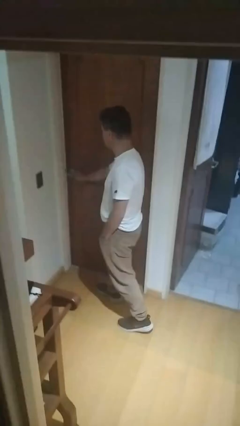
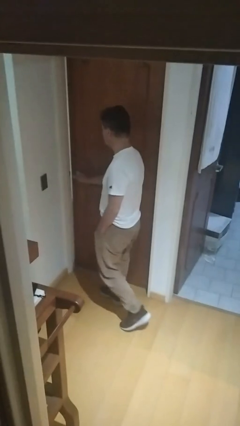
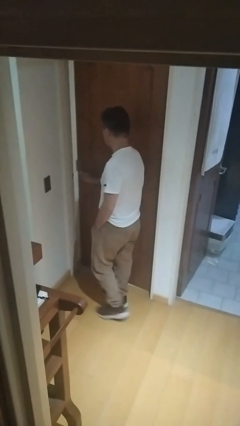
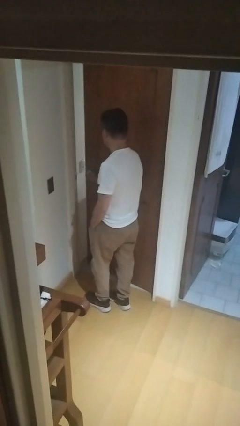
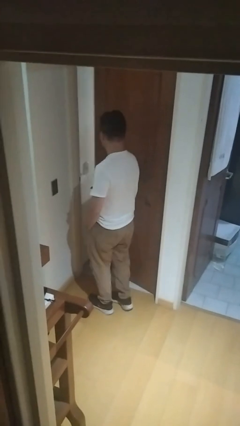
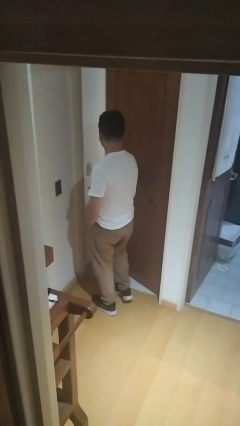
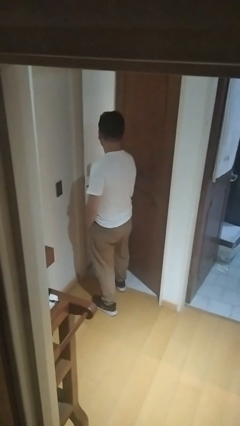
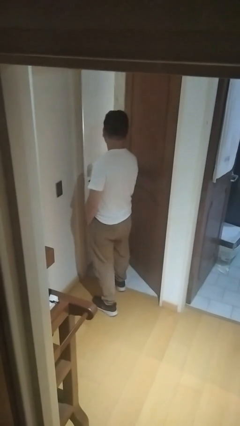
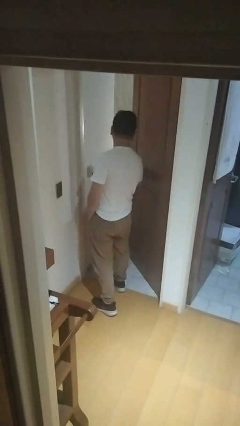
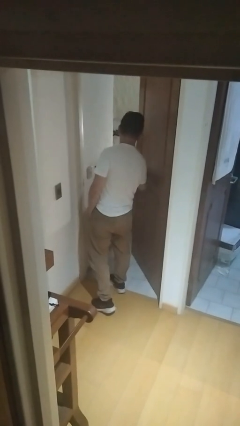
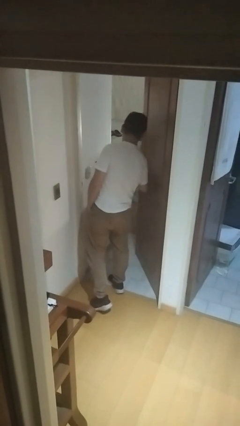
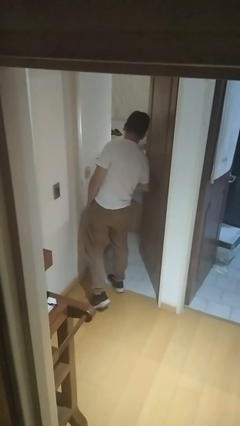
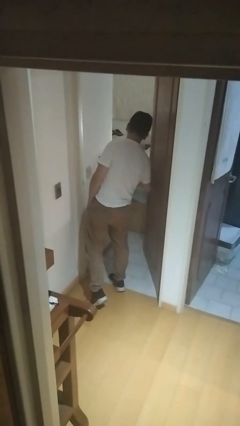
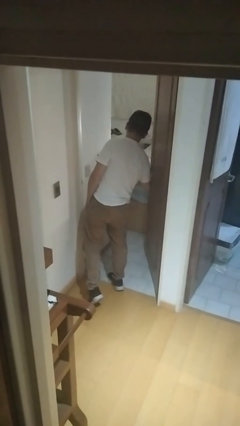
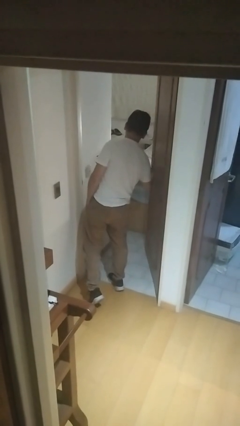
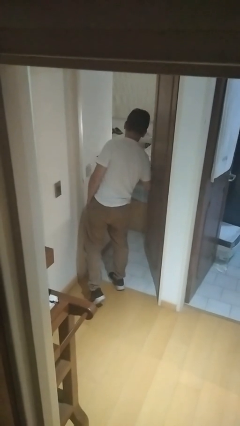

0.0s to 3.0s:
person opens facility door

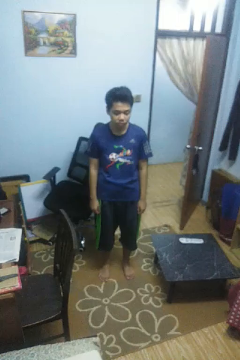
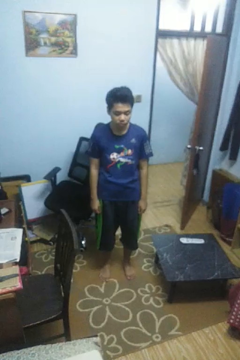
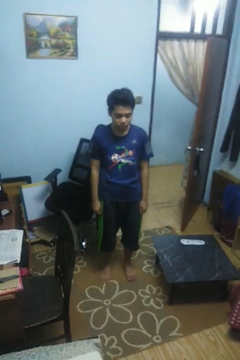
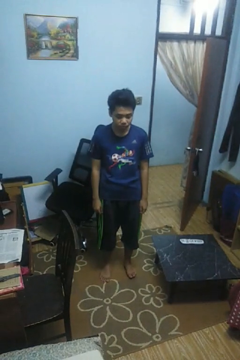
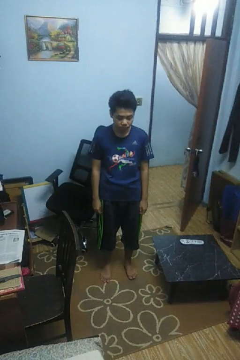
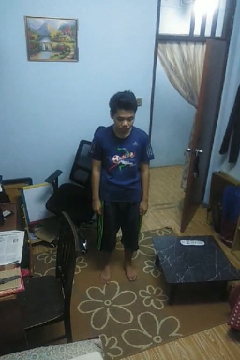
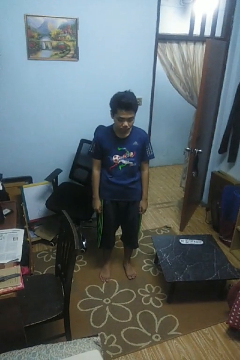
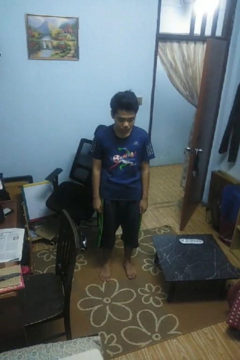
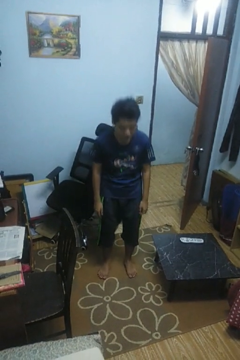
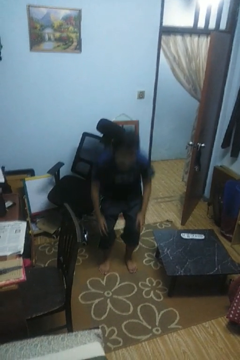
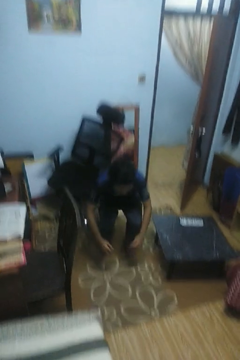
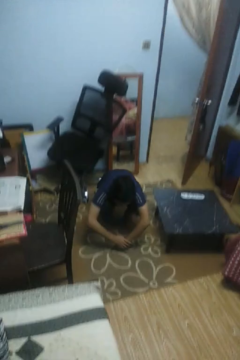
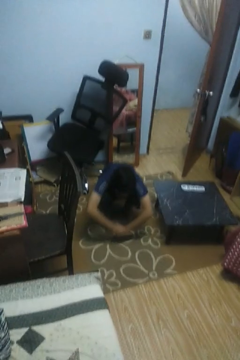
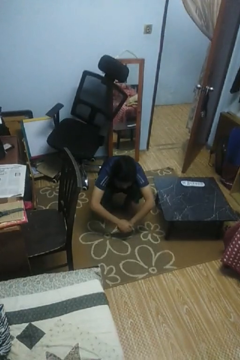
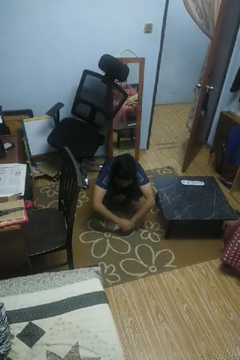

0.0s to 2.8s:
person squats

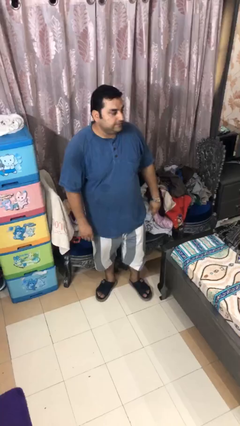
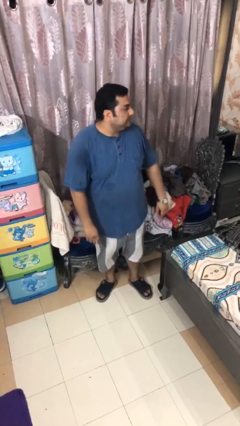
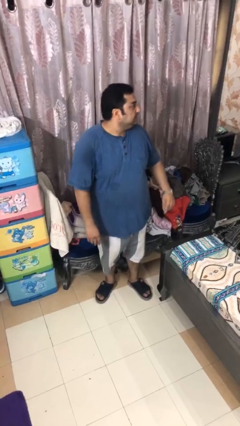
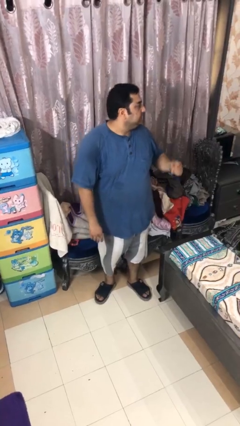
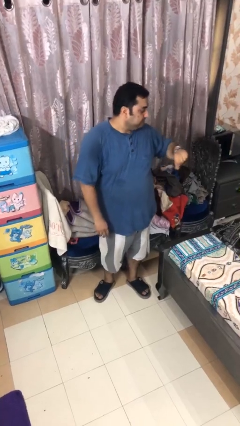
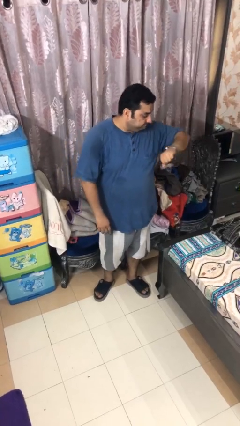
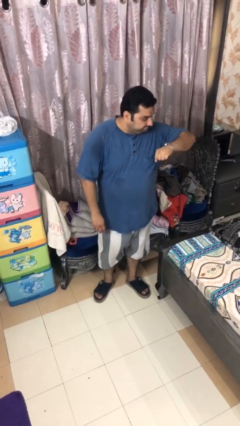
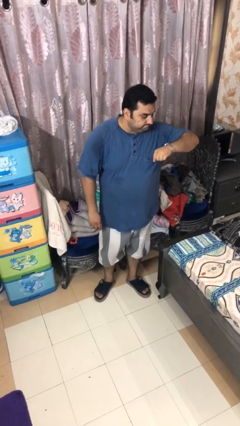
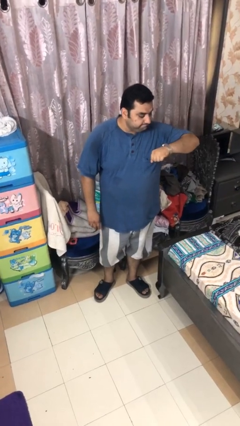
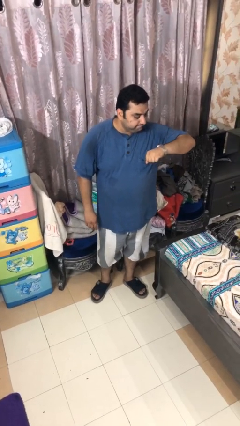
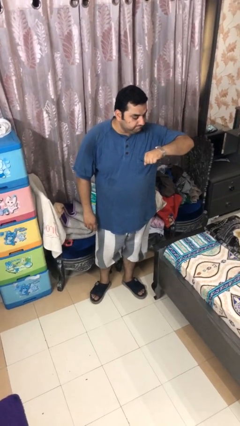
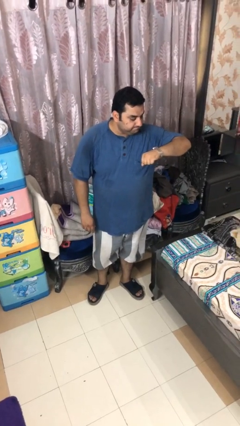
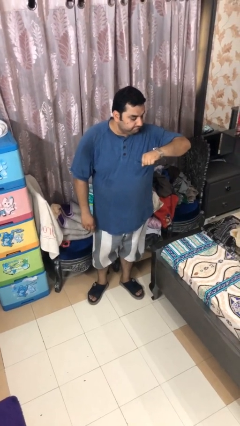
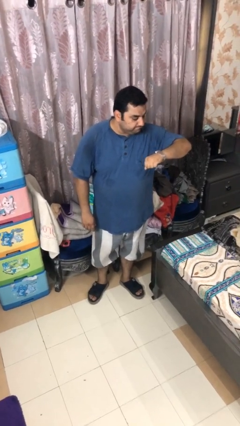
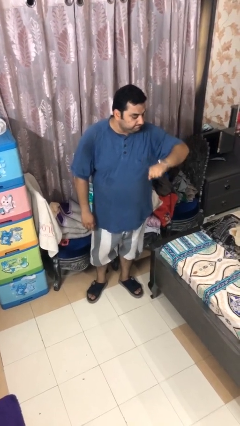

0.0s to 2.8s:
person looks at wristwatch

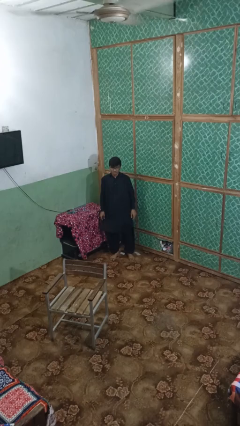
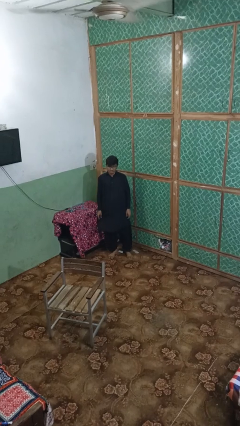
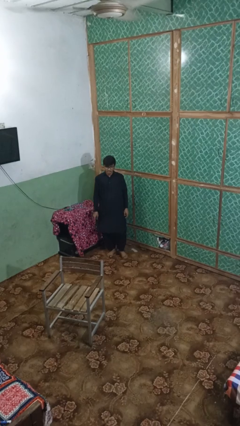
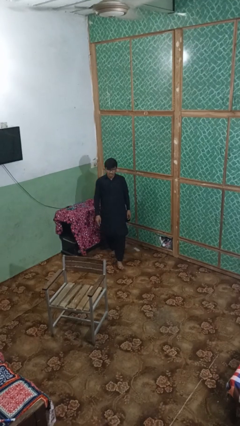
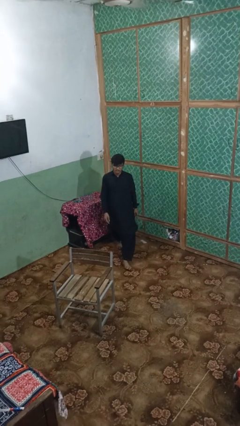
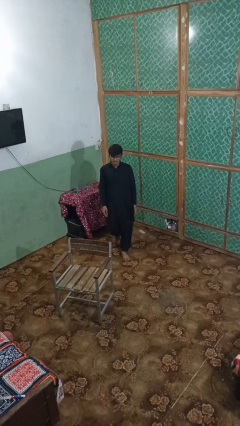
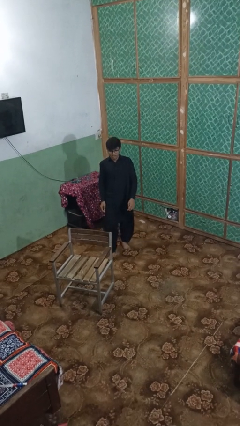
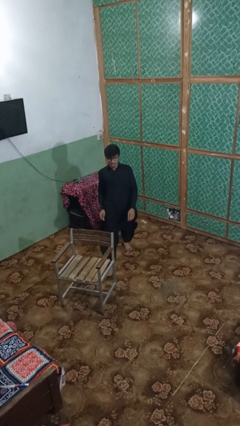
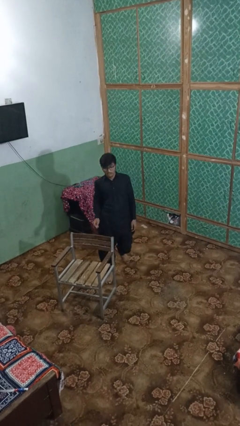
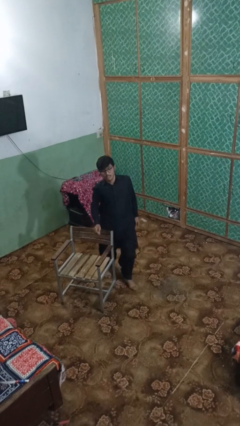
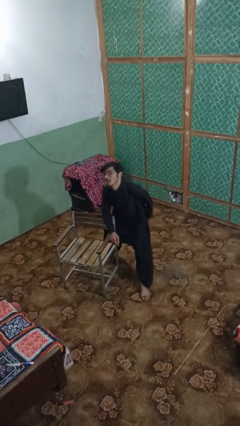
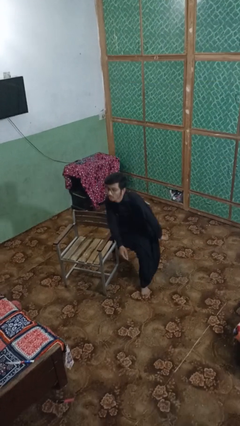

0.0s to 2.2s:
person trips on object on floor

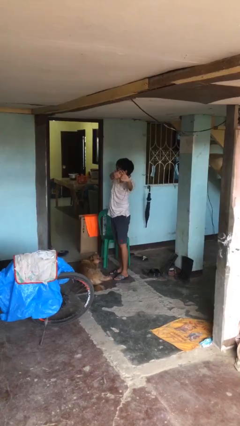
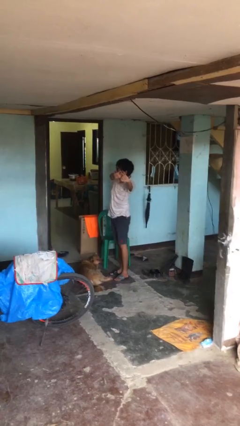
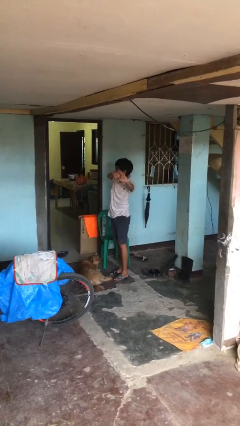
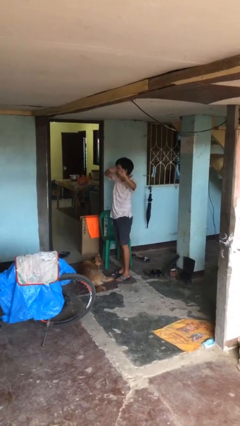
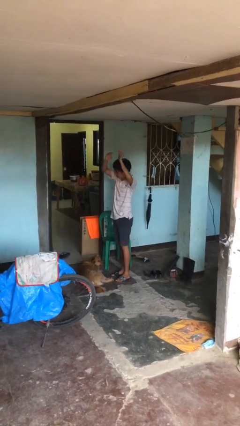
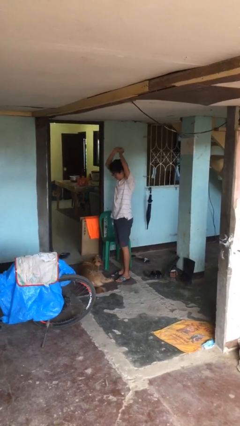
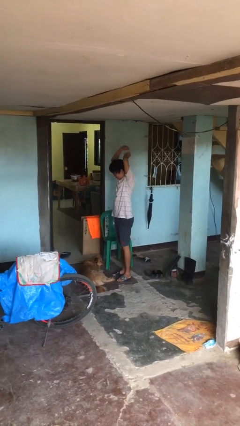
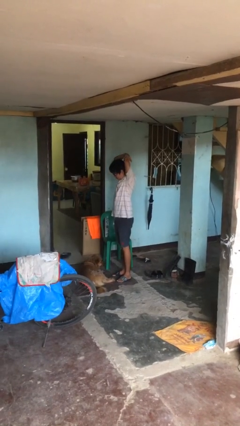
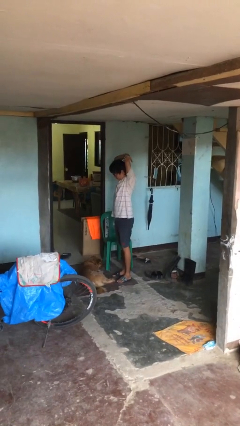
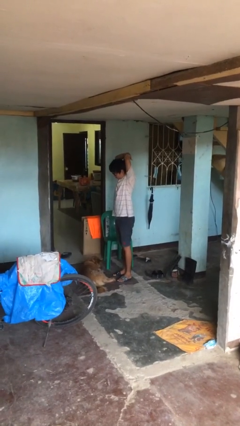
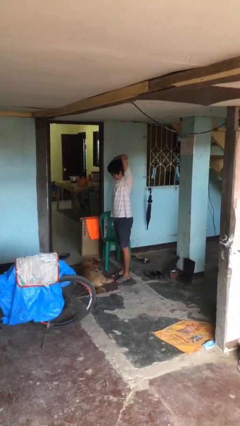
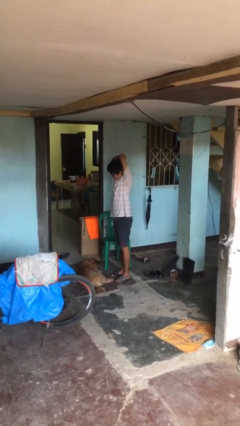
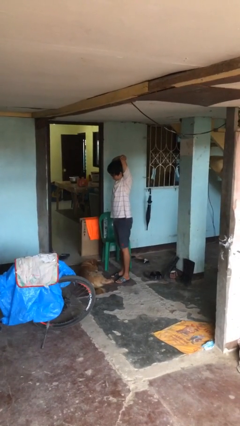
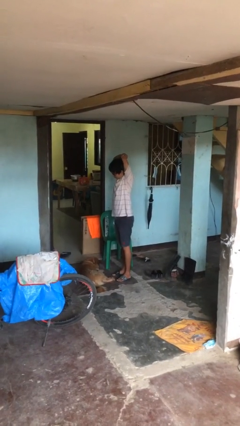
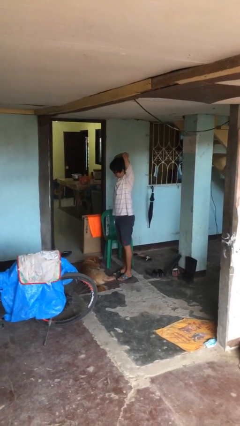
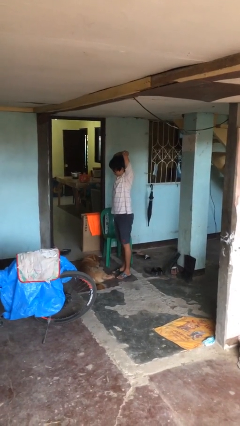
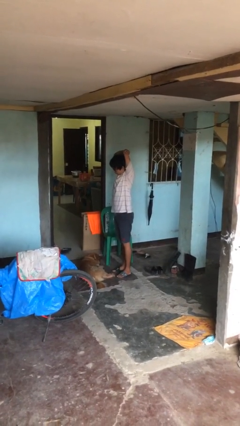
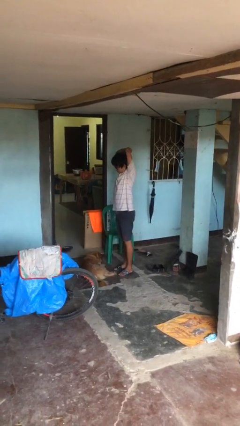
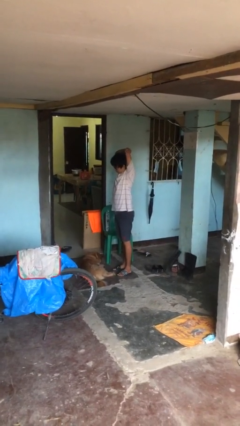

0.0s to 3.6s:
person stretches arms over head

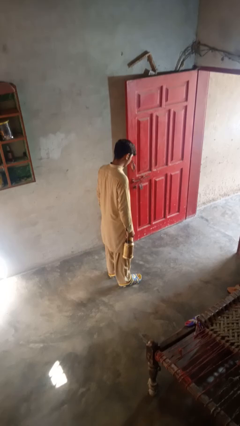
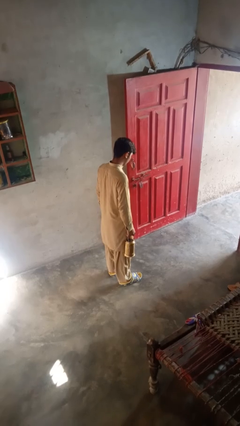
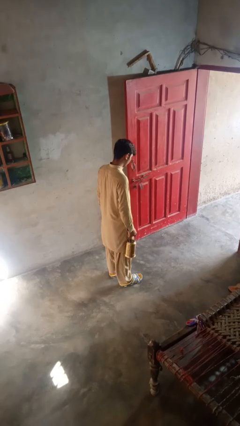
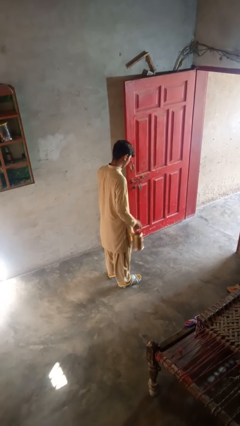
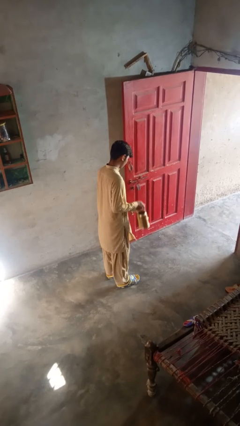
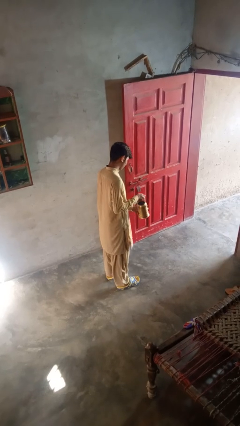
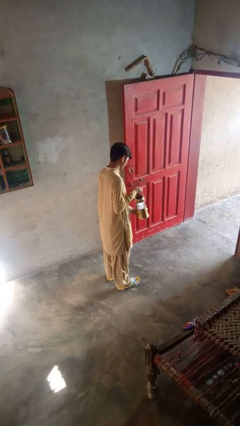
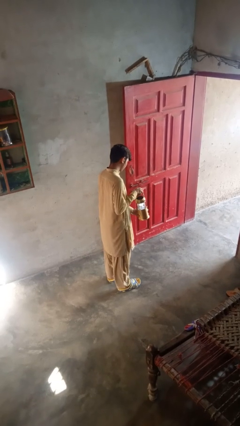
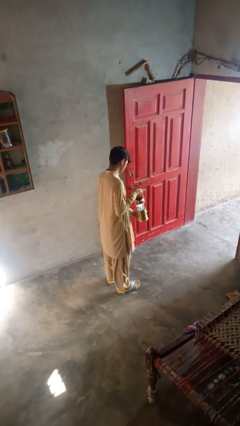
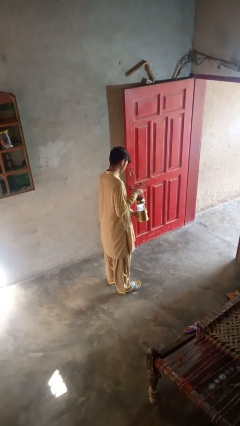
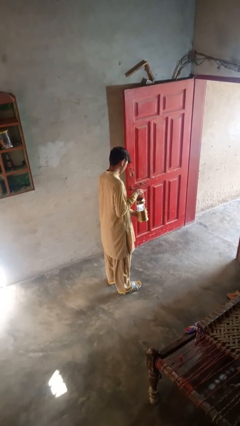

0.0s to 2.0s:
person turns on lamp

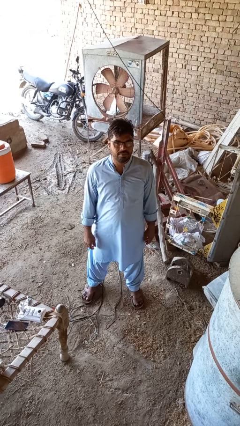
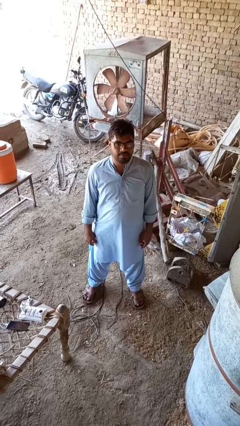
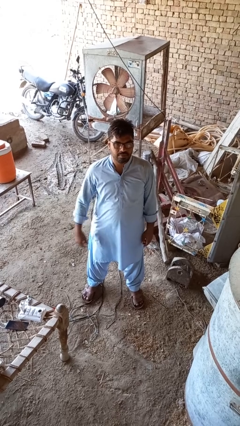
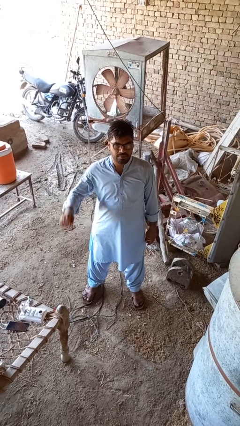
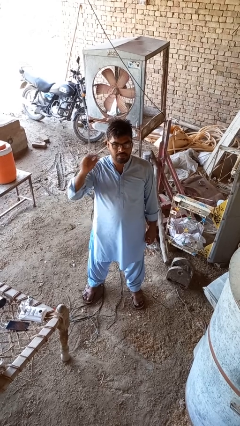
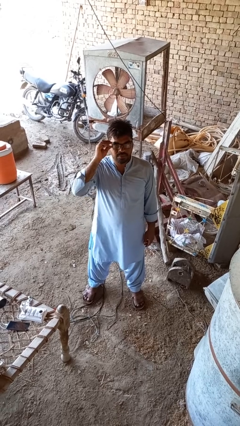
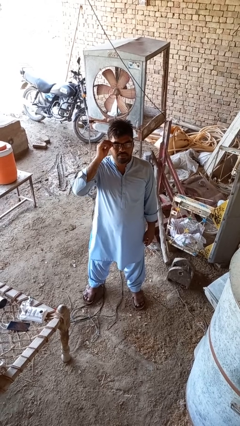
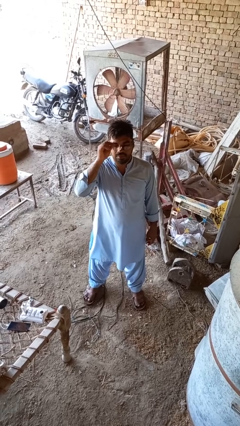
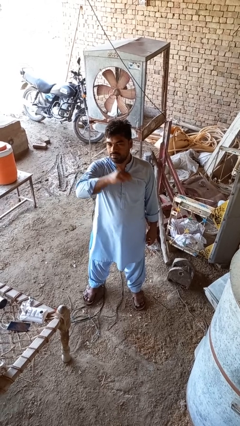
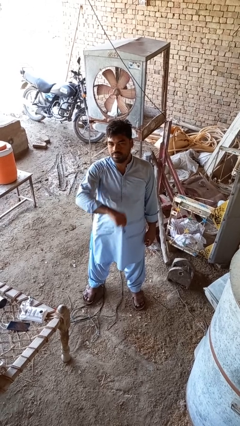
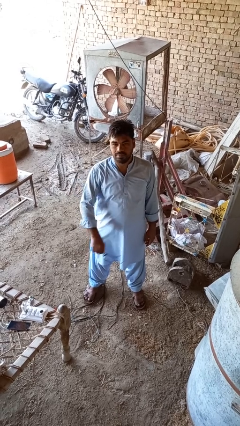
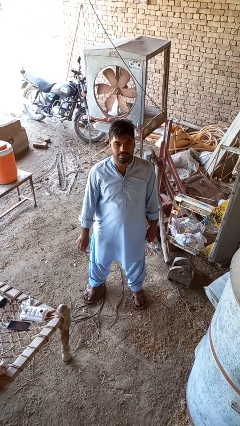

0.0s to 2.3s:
person takes off glasses
